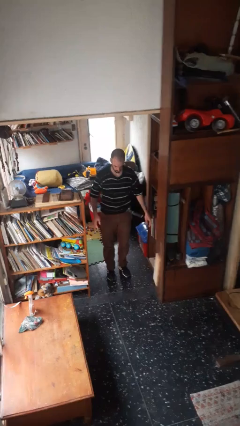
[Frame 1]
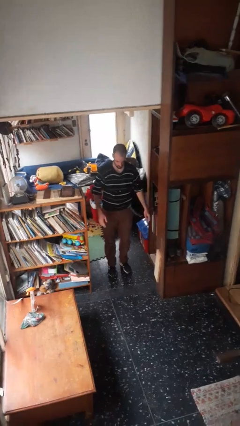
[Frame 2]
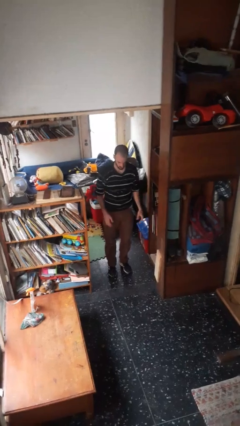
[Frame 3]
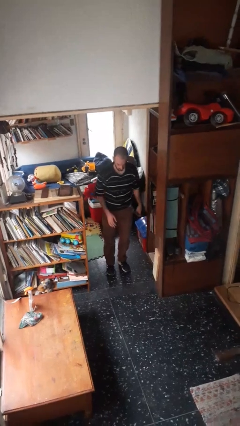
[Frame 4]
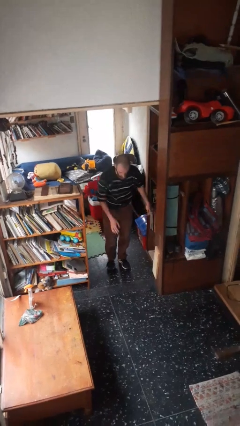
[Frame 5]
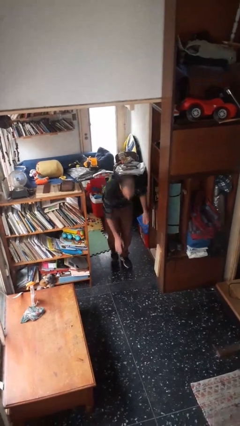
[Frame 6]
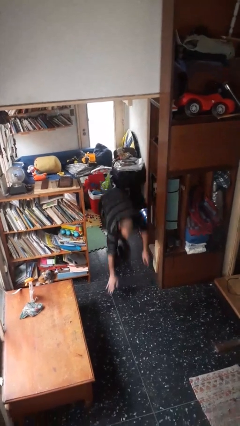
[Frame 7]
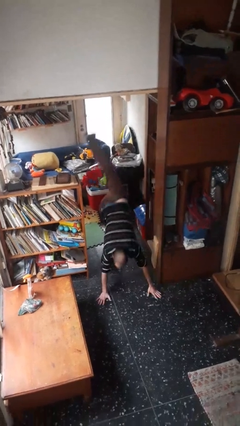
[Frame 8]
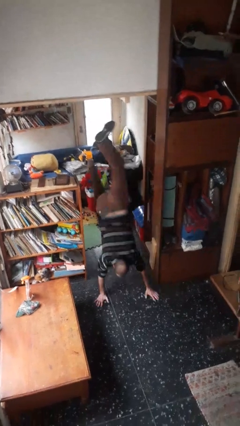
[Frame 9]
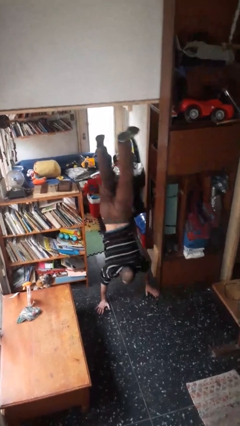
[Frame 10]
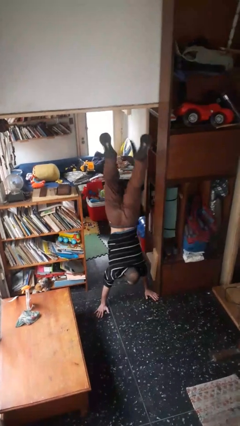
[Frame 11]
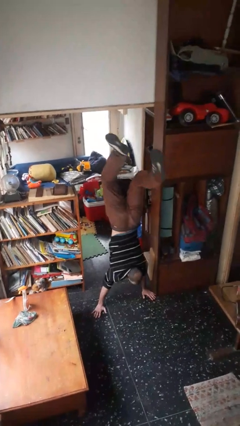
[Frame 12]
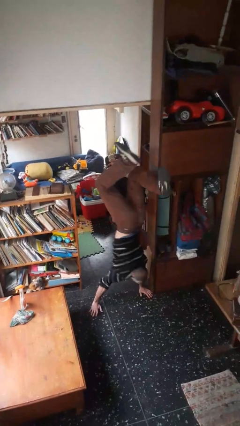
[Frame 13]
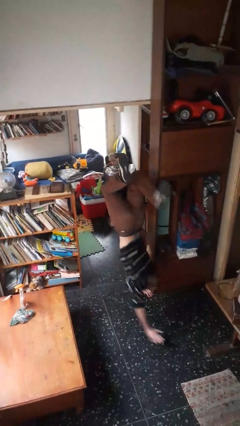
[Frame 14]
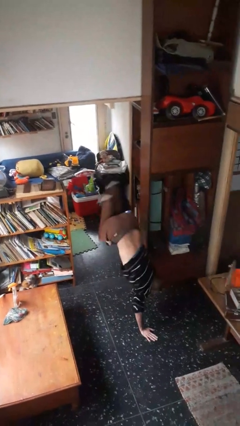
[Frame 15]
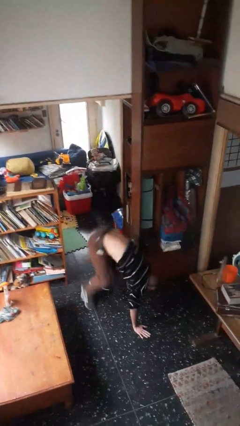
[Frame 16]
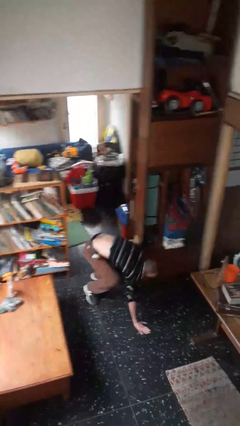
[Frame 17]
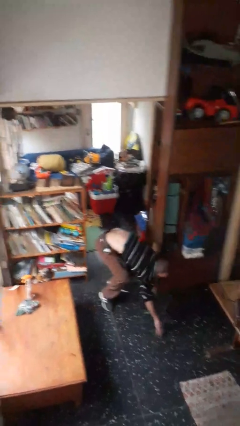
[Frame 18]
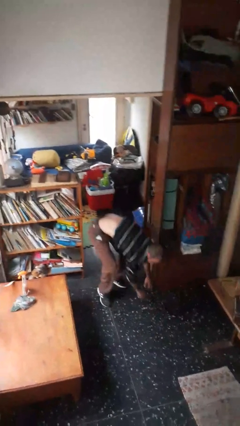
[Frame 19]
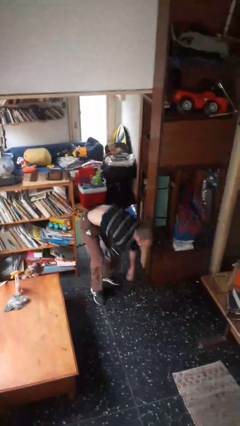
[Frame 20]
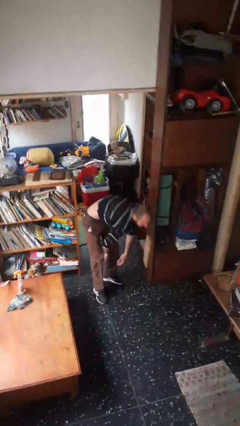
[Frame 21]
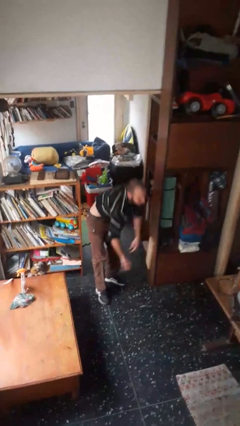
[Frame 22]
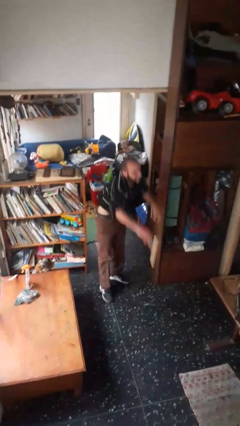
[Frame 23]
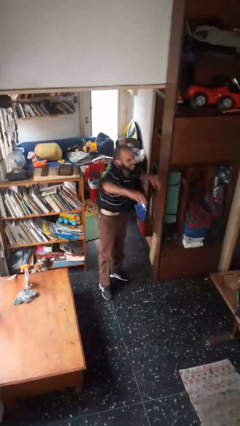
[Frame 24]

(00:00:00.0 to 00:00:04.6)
person handstand

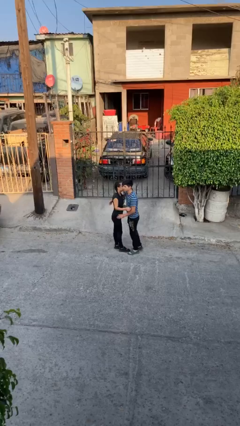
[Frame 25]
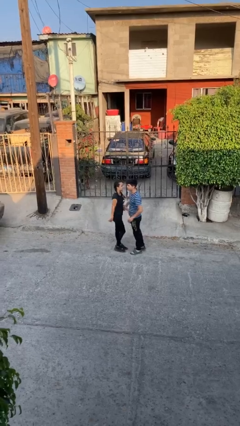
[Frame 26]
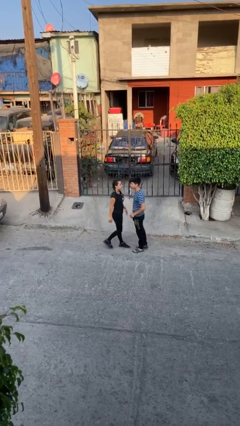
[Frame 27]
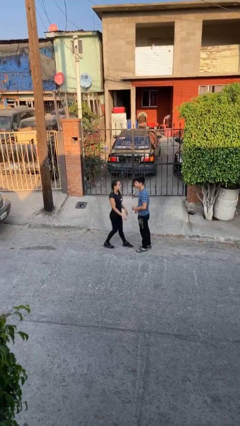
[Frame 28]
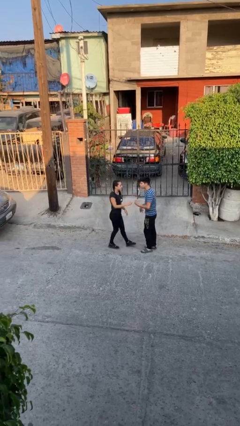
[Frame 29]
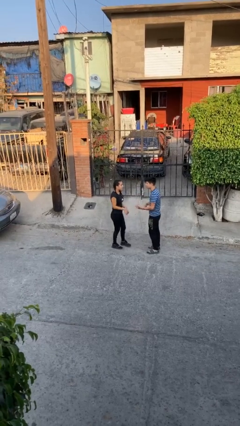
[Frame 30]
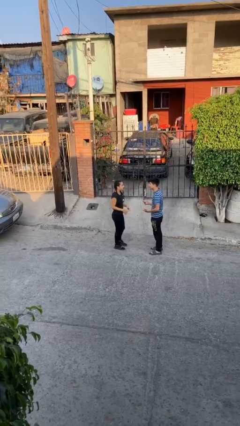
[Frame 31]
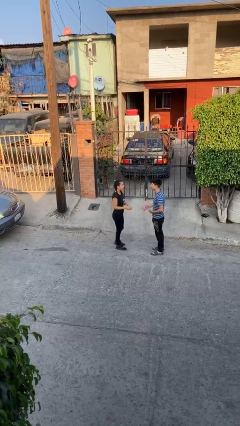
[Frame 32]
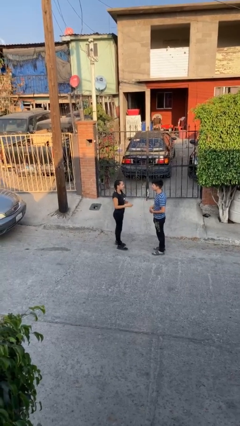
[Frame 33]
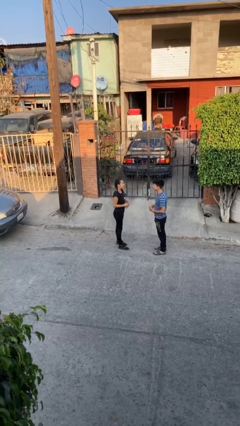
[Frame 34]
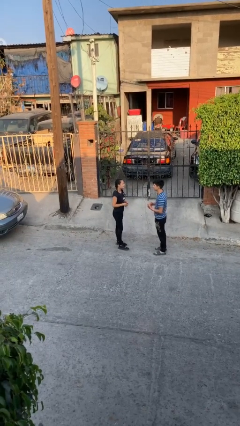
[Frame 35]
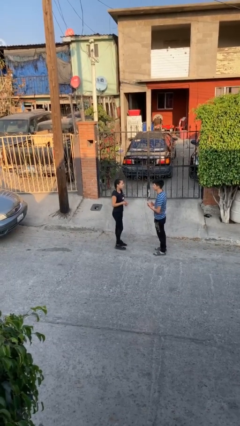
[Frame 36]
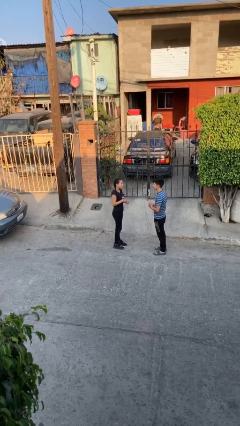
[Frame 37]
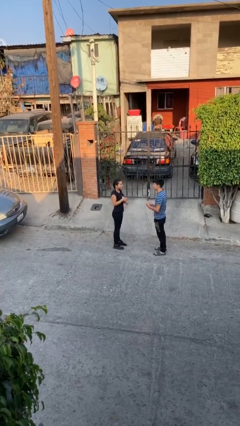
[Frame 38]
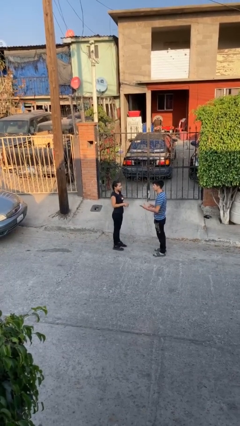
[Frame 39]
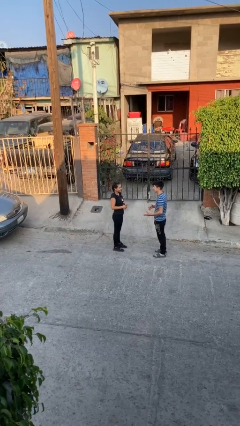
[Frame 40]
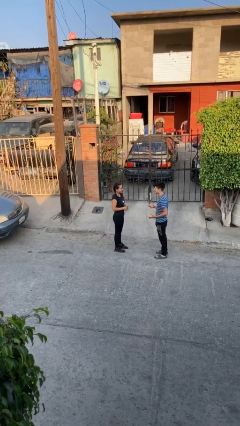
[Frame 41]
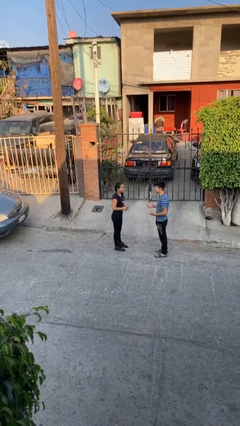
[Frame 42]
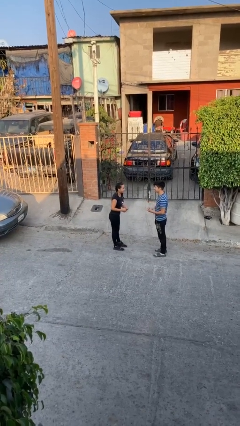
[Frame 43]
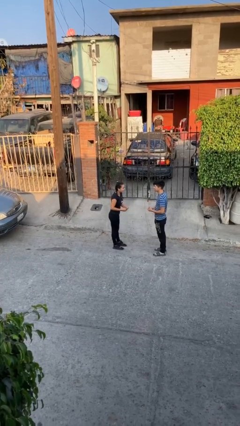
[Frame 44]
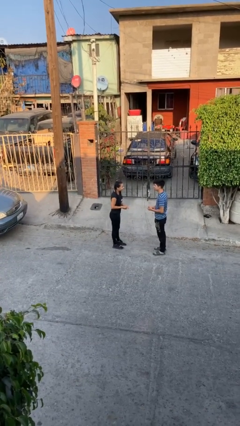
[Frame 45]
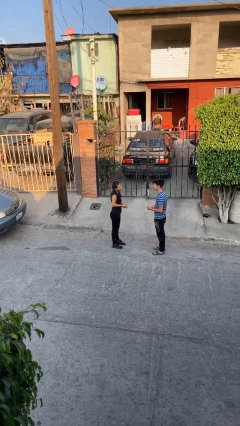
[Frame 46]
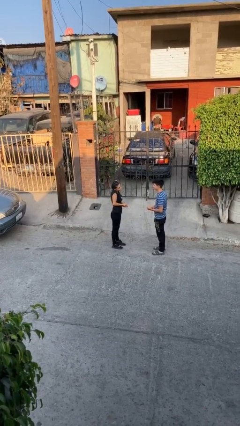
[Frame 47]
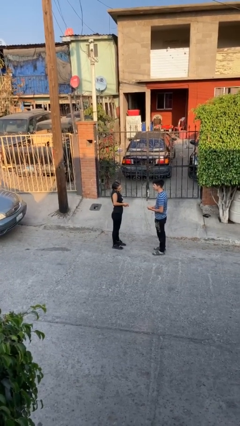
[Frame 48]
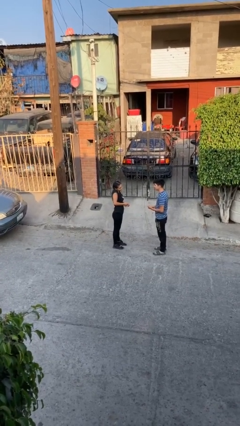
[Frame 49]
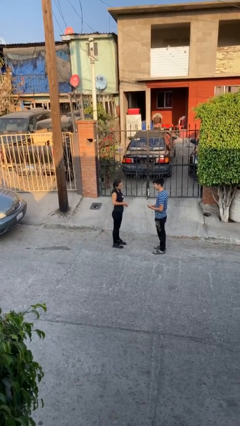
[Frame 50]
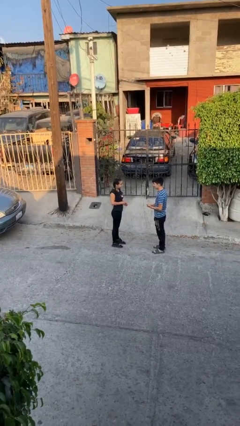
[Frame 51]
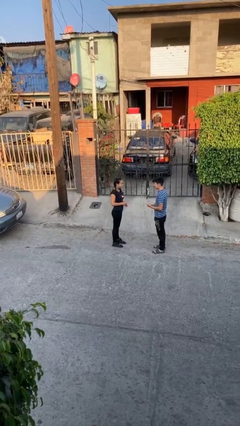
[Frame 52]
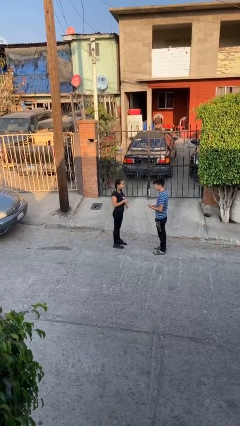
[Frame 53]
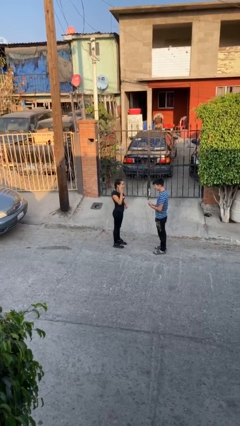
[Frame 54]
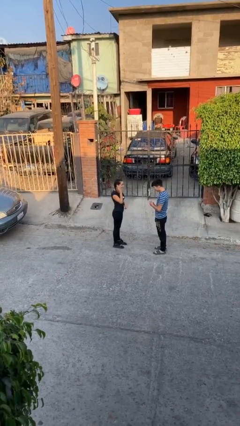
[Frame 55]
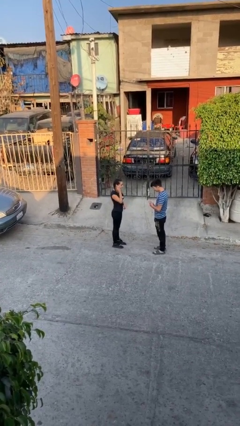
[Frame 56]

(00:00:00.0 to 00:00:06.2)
person talks to person

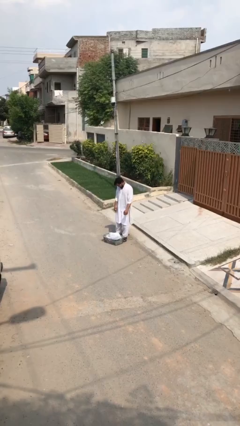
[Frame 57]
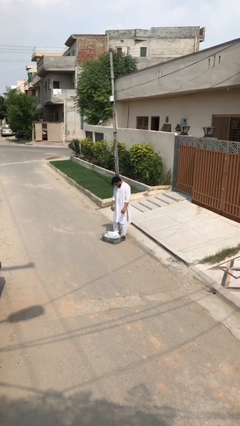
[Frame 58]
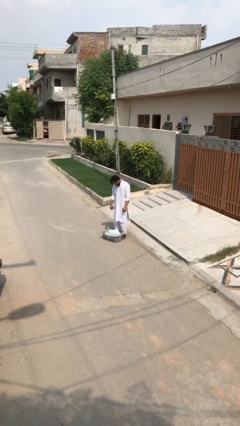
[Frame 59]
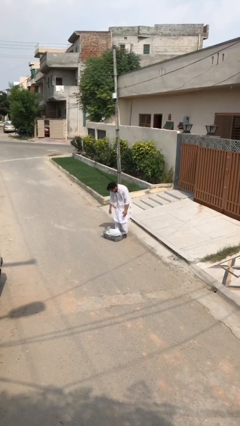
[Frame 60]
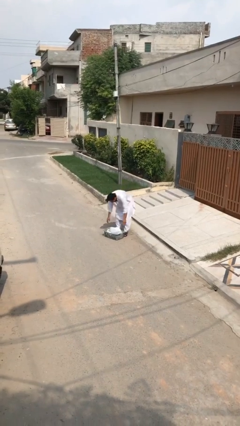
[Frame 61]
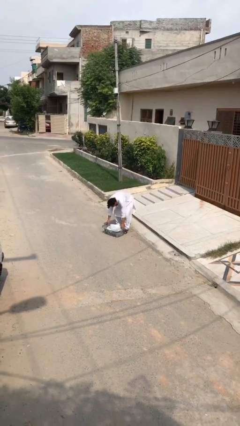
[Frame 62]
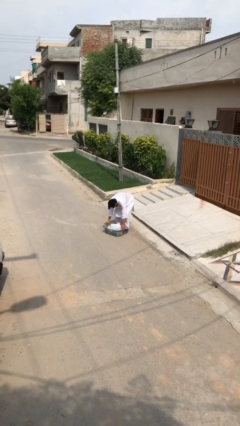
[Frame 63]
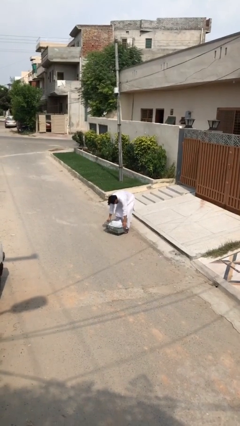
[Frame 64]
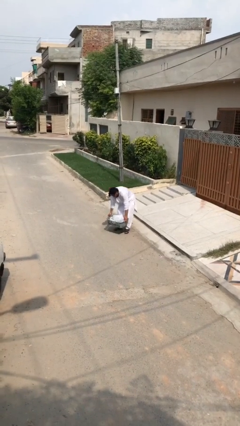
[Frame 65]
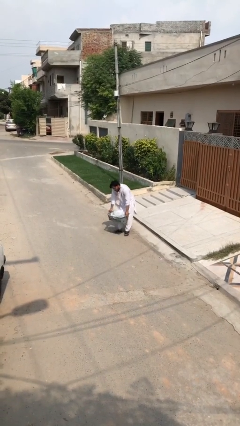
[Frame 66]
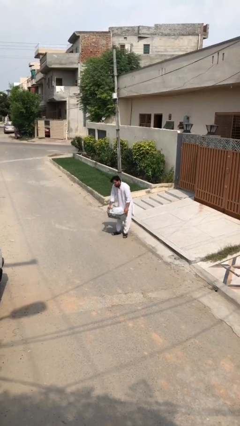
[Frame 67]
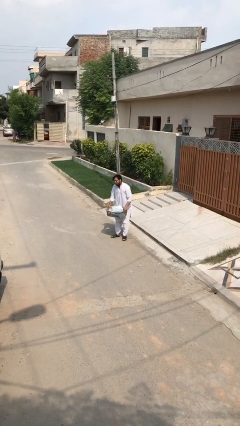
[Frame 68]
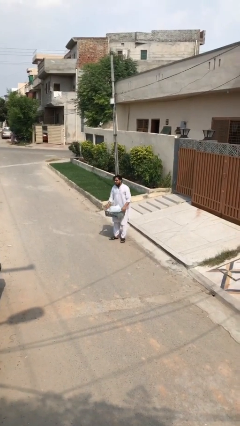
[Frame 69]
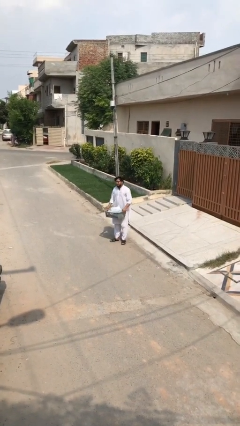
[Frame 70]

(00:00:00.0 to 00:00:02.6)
person picks up object from floor

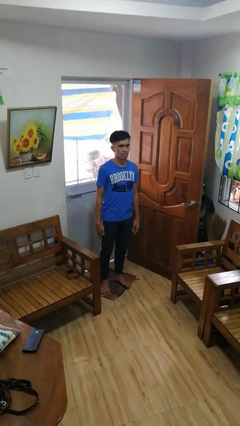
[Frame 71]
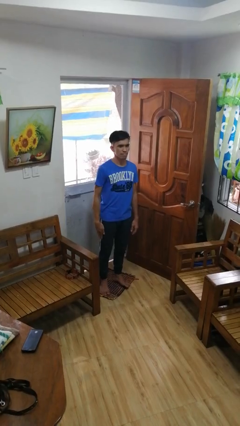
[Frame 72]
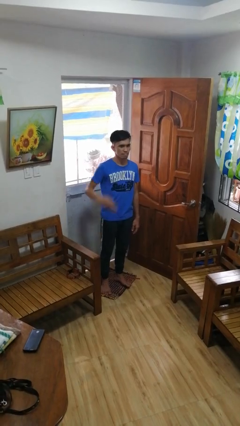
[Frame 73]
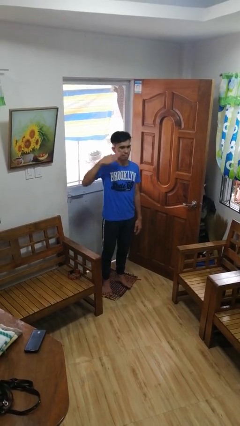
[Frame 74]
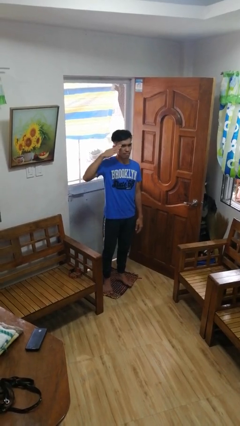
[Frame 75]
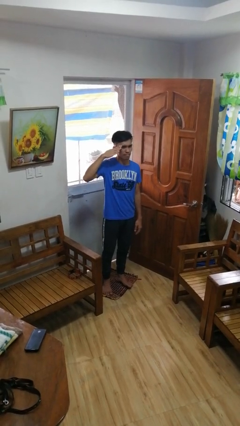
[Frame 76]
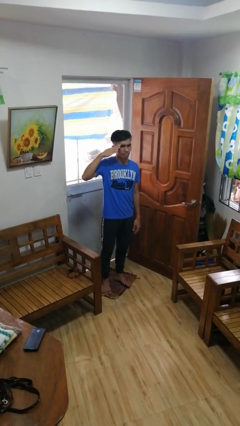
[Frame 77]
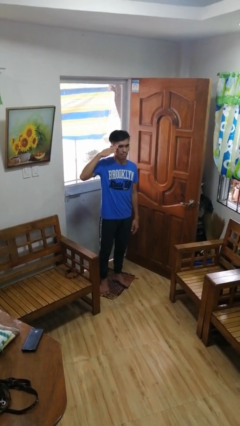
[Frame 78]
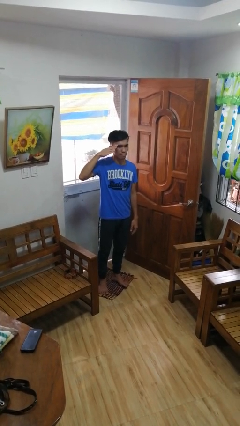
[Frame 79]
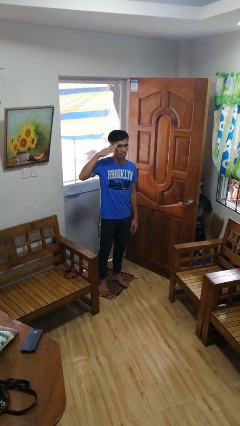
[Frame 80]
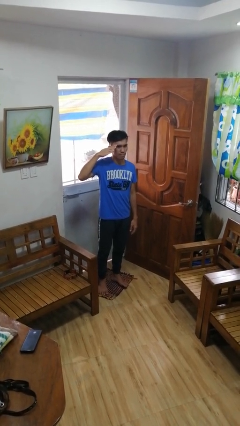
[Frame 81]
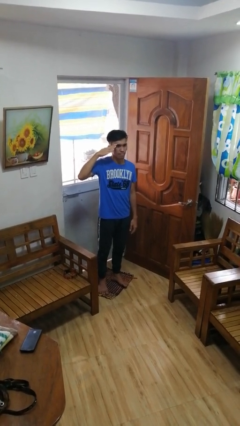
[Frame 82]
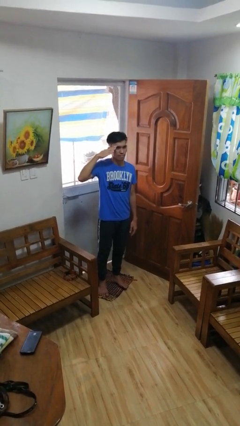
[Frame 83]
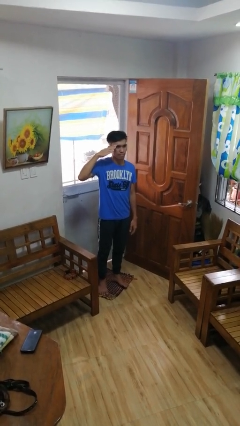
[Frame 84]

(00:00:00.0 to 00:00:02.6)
person salutes

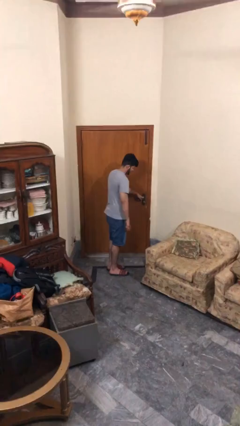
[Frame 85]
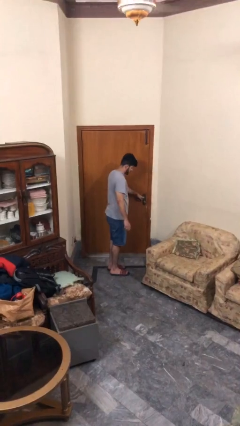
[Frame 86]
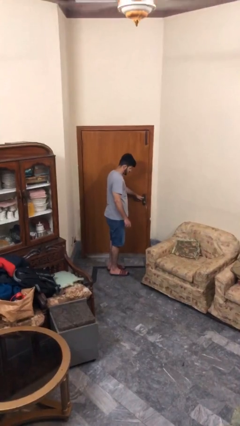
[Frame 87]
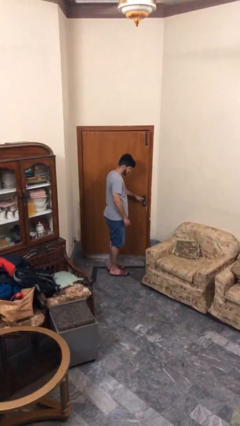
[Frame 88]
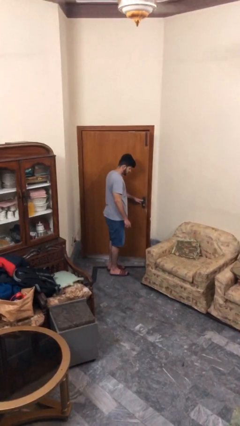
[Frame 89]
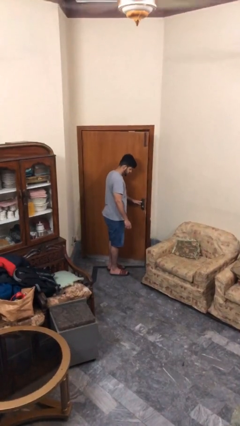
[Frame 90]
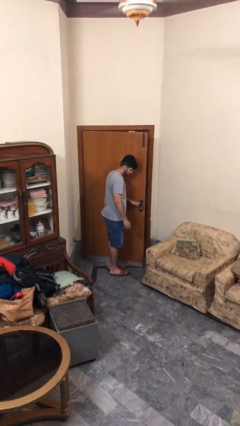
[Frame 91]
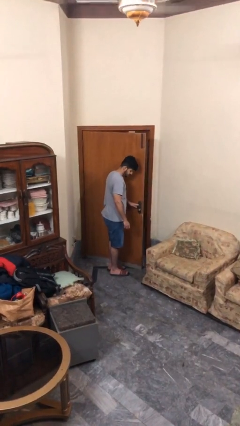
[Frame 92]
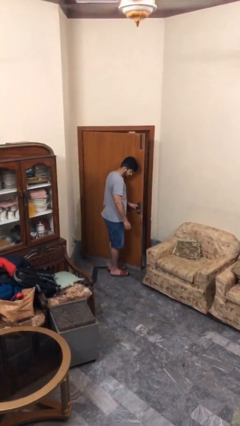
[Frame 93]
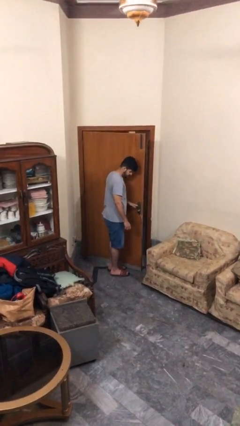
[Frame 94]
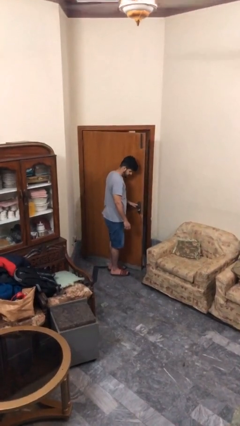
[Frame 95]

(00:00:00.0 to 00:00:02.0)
person opens facility door
